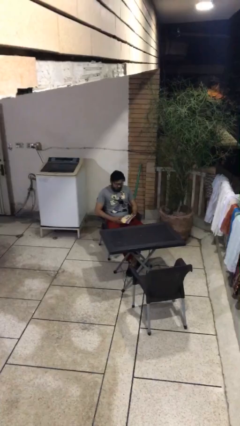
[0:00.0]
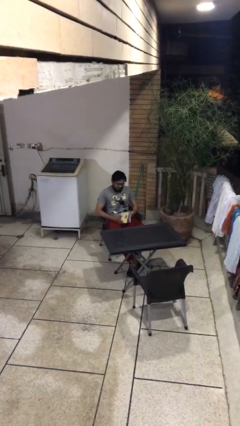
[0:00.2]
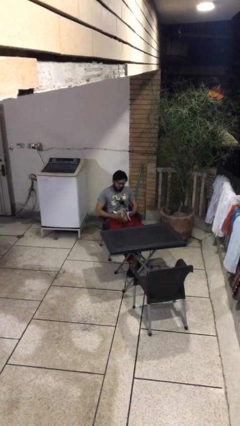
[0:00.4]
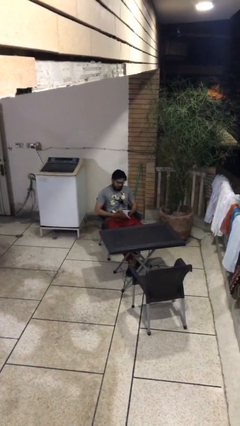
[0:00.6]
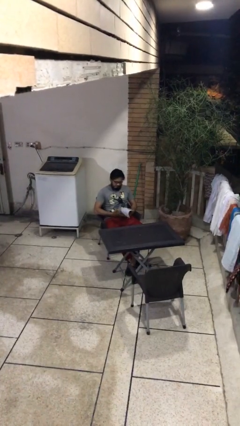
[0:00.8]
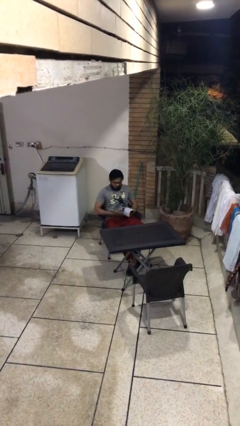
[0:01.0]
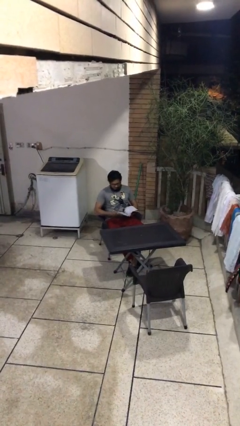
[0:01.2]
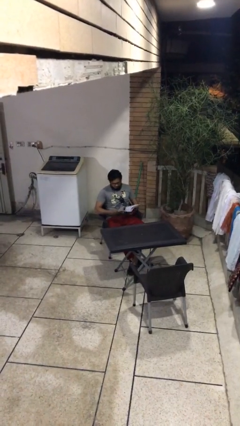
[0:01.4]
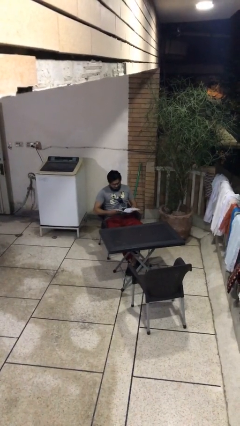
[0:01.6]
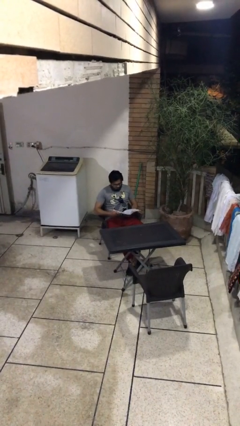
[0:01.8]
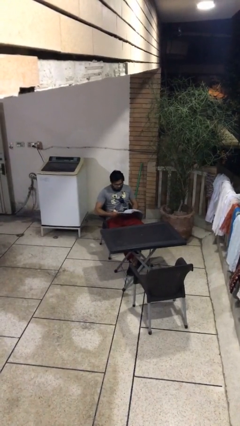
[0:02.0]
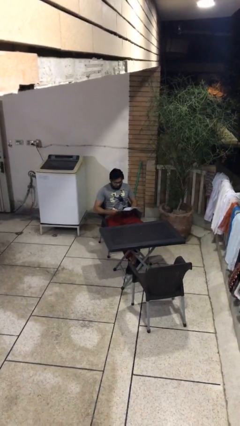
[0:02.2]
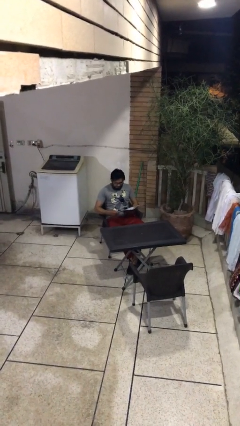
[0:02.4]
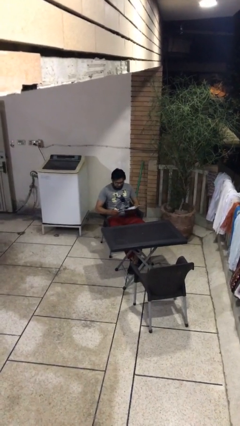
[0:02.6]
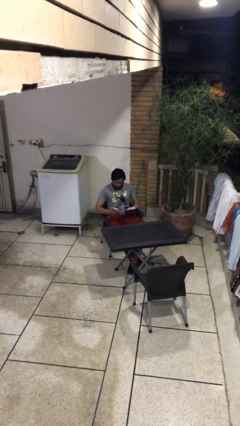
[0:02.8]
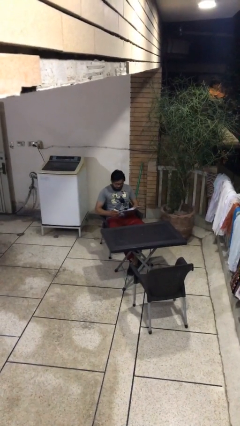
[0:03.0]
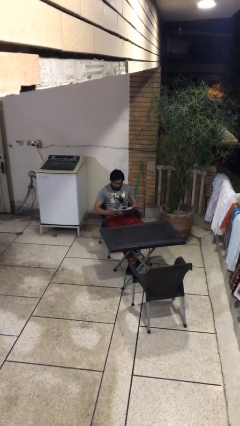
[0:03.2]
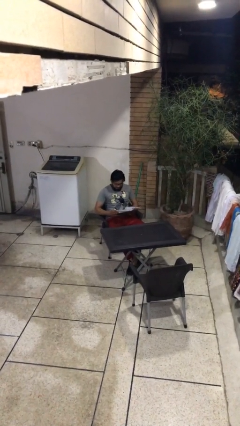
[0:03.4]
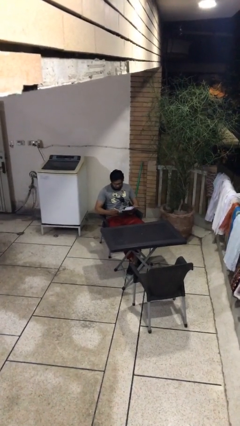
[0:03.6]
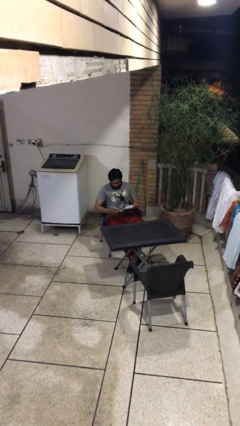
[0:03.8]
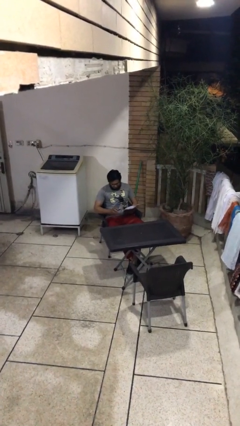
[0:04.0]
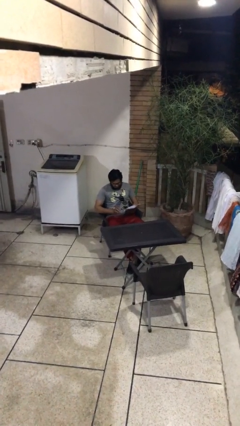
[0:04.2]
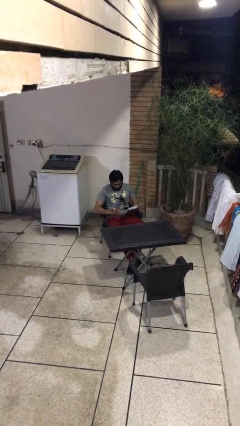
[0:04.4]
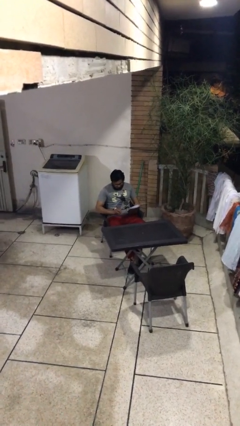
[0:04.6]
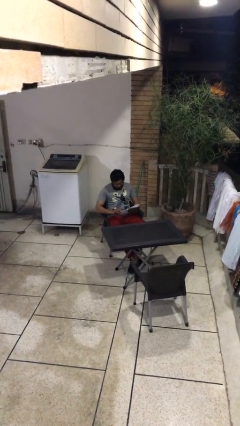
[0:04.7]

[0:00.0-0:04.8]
person reads document

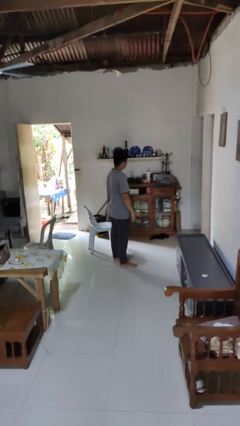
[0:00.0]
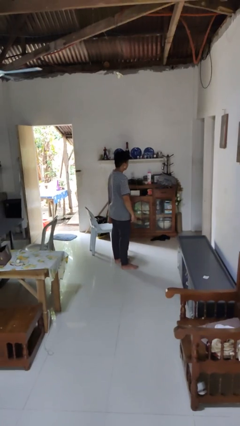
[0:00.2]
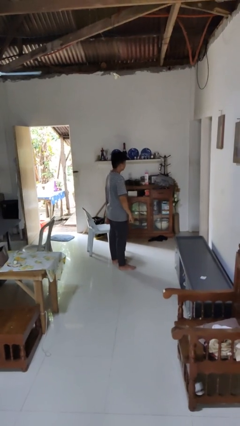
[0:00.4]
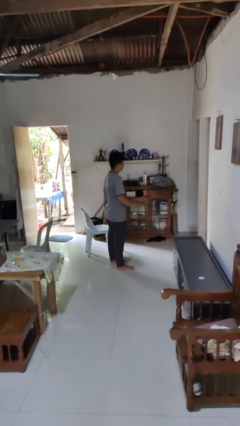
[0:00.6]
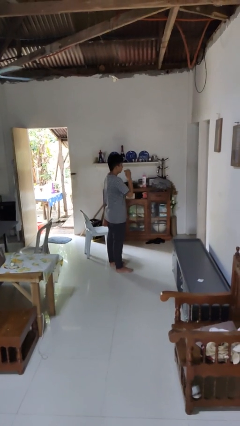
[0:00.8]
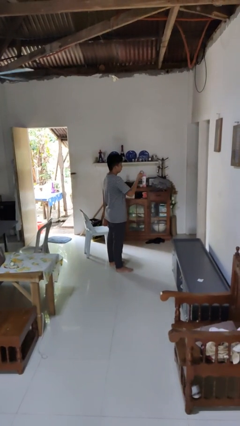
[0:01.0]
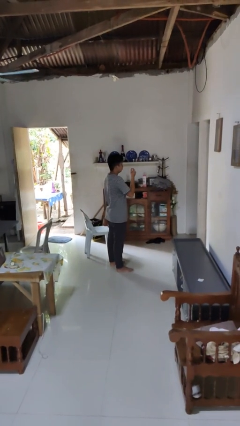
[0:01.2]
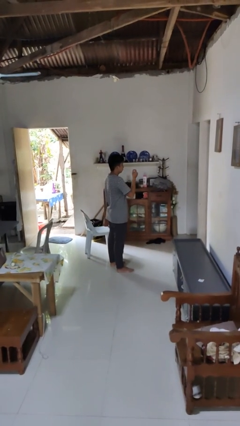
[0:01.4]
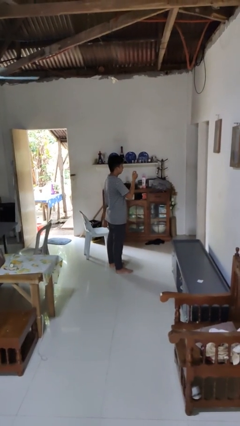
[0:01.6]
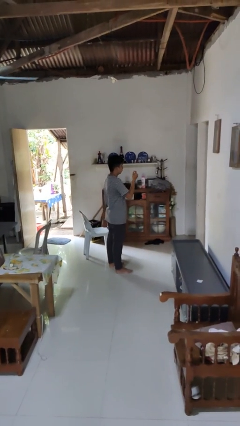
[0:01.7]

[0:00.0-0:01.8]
person snaps fingers

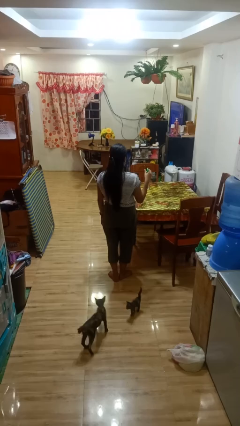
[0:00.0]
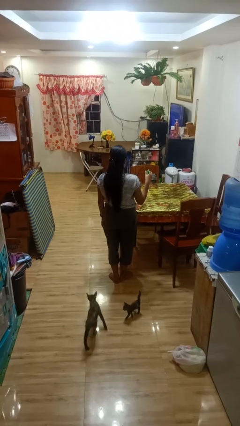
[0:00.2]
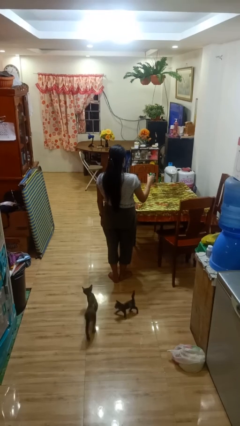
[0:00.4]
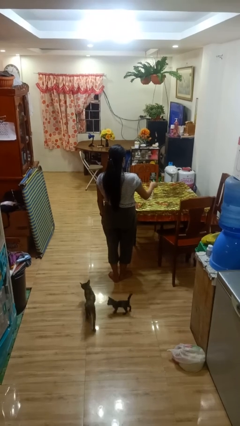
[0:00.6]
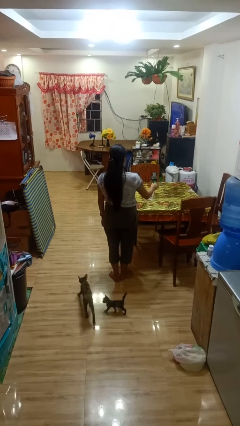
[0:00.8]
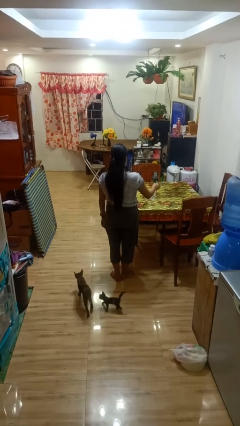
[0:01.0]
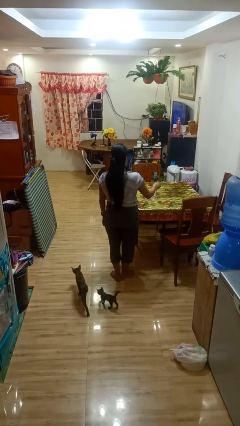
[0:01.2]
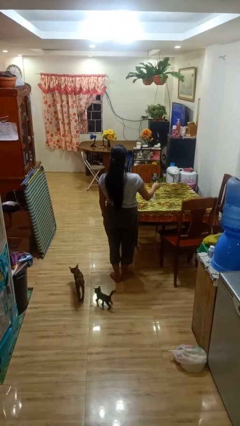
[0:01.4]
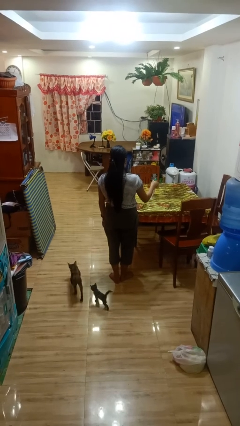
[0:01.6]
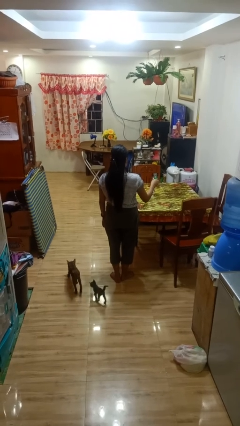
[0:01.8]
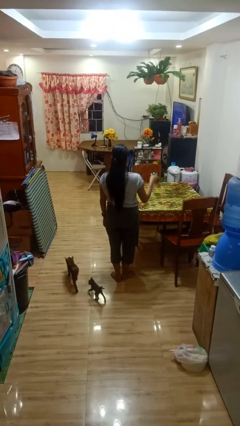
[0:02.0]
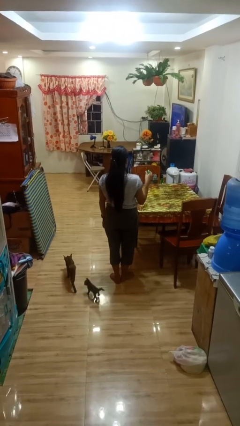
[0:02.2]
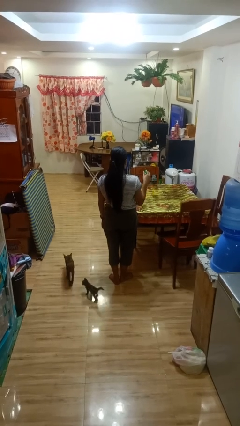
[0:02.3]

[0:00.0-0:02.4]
person sprays from bottle

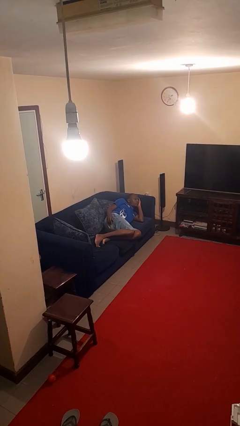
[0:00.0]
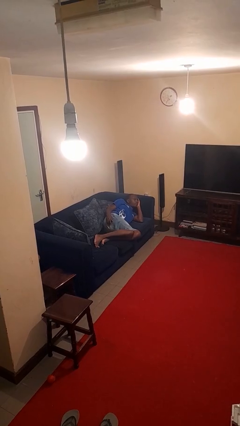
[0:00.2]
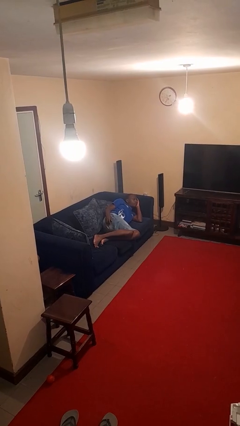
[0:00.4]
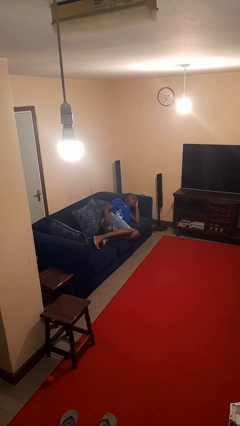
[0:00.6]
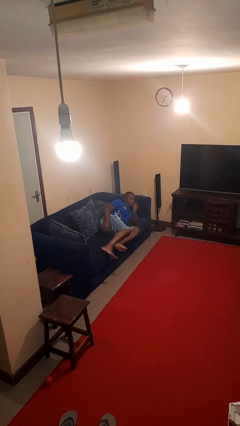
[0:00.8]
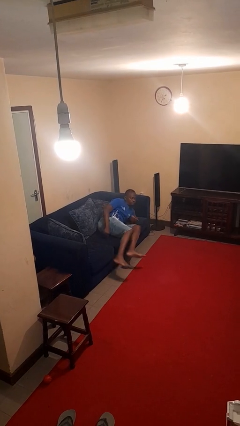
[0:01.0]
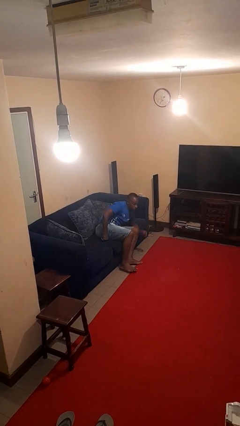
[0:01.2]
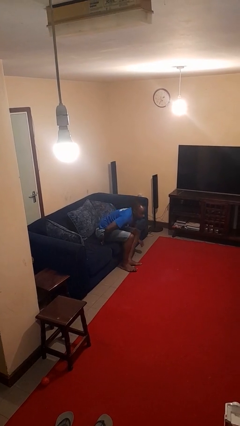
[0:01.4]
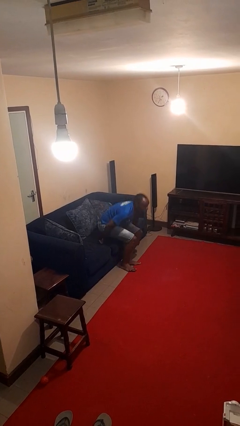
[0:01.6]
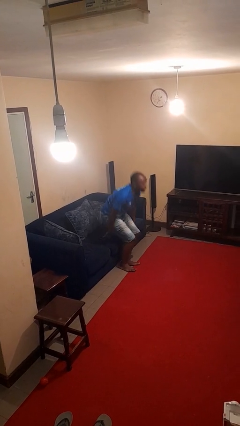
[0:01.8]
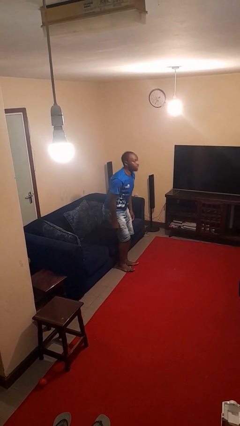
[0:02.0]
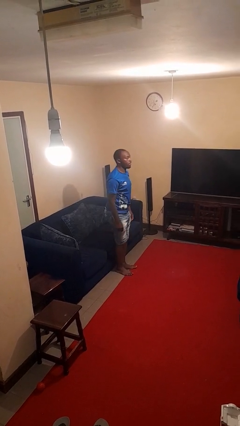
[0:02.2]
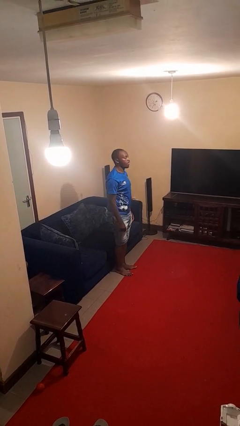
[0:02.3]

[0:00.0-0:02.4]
person stands up

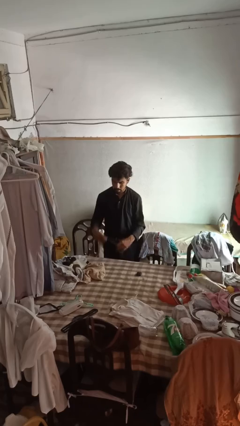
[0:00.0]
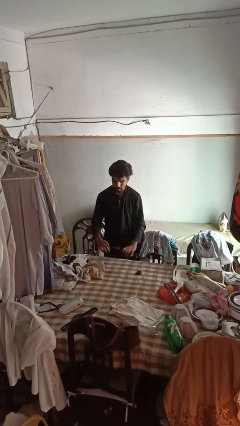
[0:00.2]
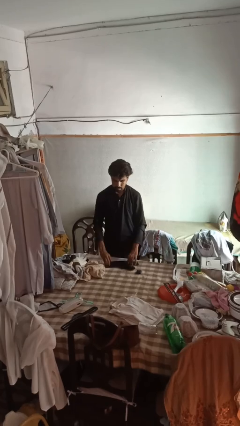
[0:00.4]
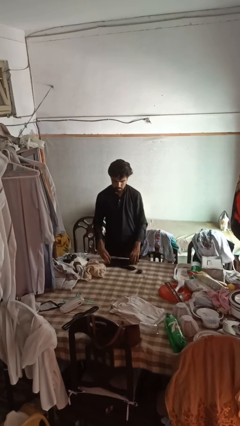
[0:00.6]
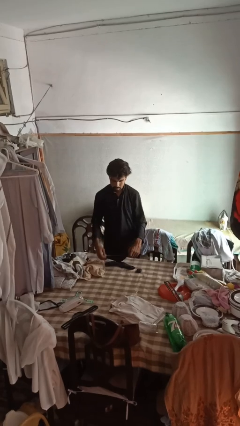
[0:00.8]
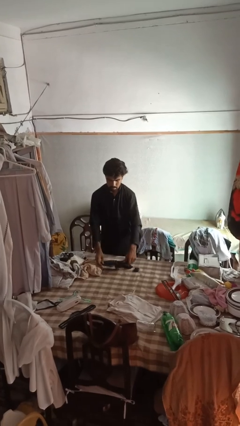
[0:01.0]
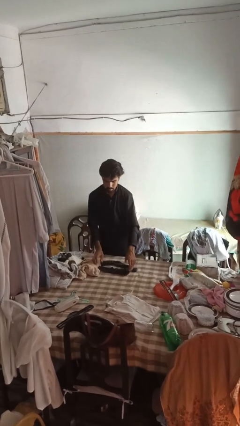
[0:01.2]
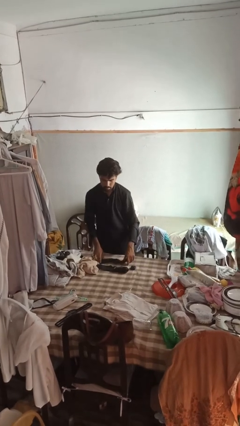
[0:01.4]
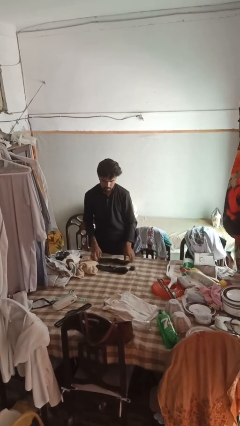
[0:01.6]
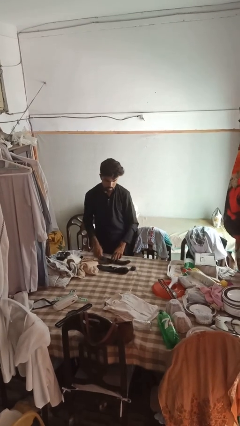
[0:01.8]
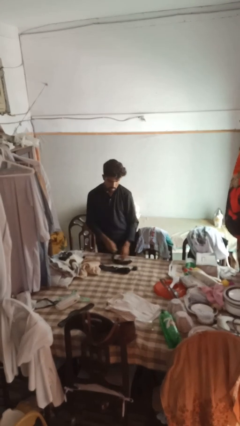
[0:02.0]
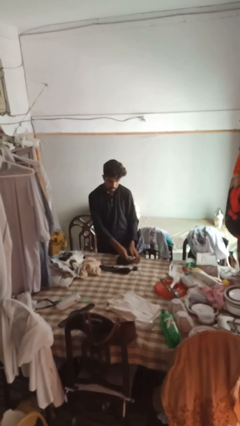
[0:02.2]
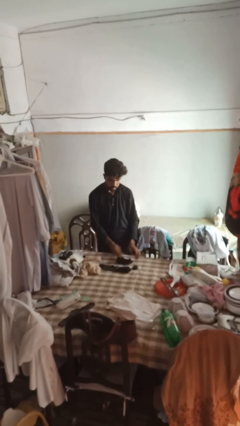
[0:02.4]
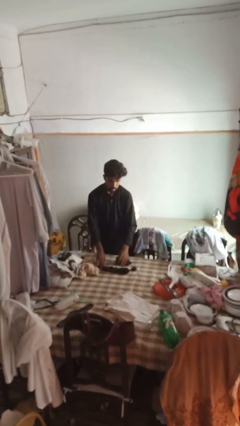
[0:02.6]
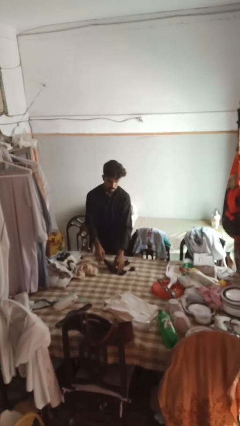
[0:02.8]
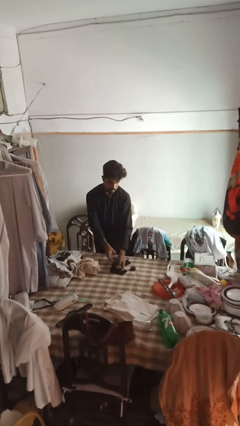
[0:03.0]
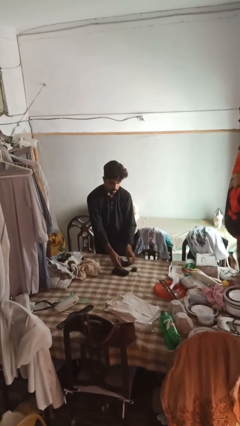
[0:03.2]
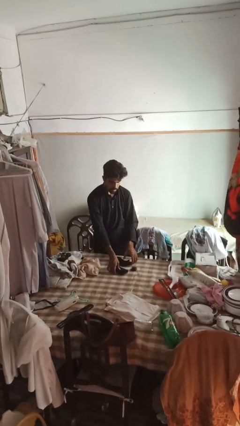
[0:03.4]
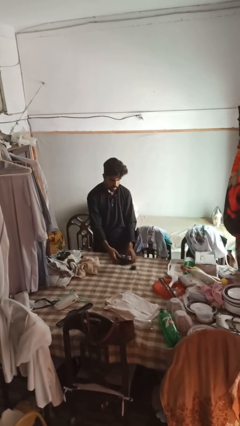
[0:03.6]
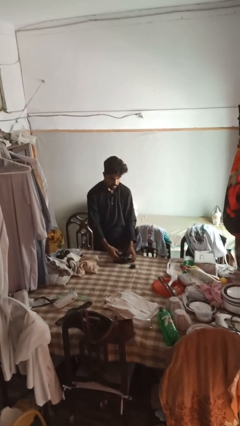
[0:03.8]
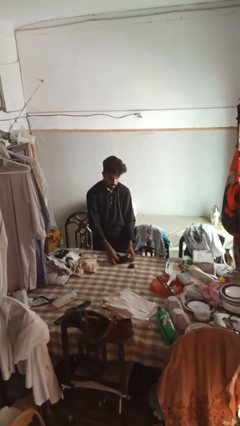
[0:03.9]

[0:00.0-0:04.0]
person folds socks

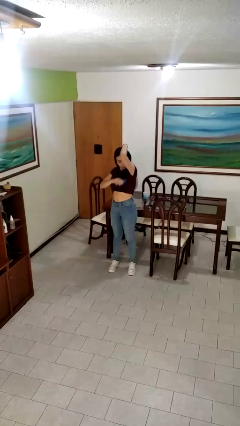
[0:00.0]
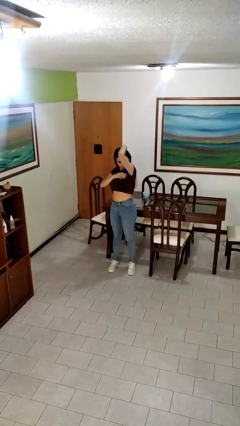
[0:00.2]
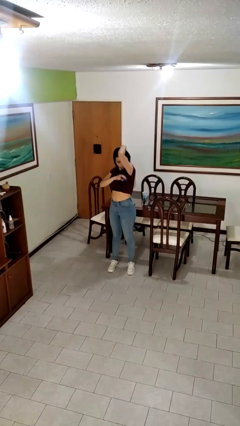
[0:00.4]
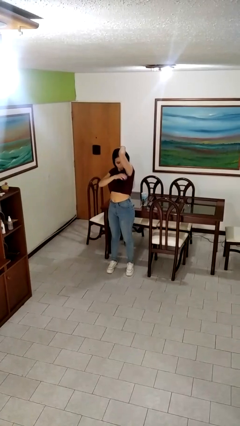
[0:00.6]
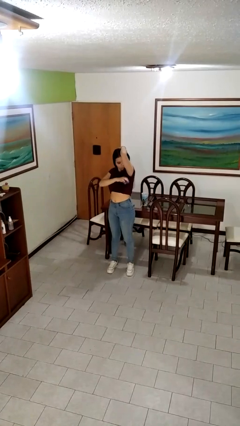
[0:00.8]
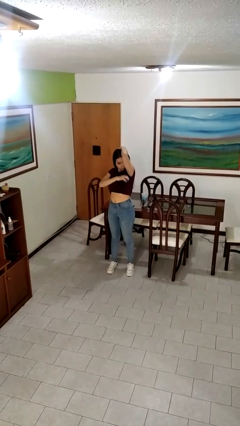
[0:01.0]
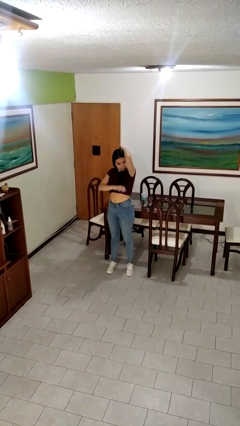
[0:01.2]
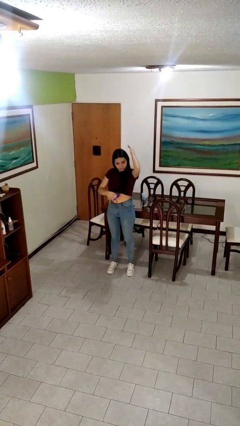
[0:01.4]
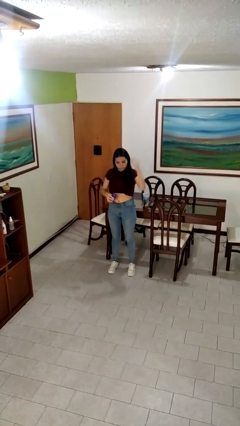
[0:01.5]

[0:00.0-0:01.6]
person applies deodorant

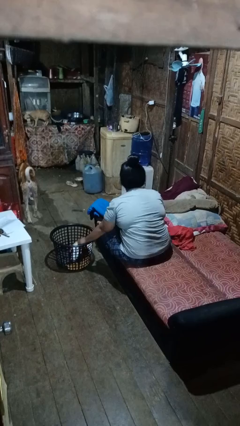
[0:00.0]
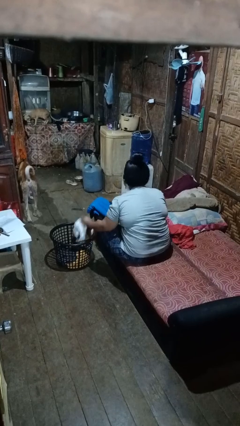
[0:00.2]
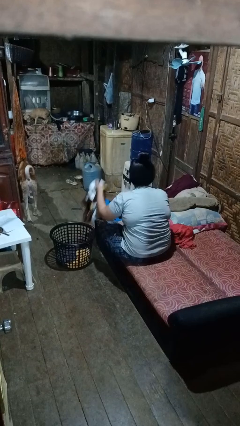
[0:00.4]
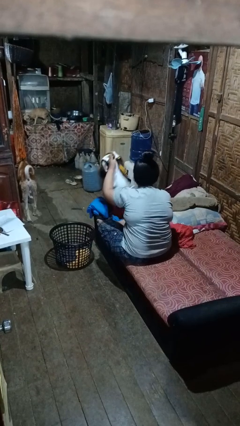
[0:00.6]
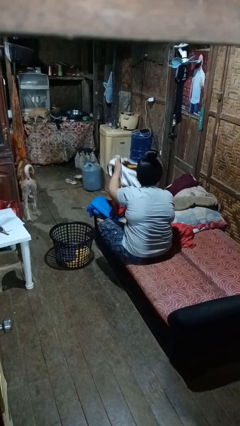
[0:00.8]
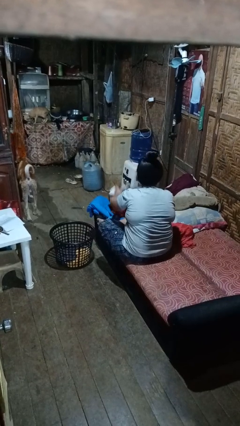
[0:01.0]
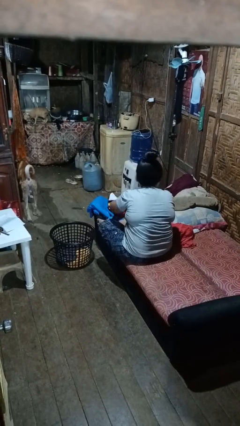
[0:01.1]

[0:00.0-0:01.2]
person takes object from basket
